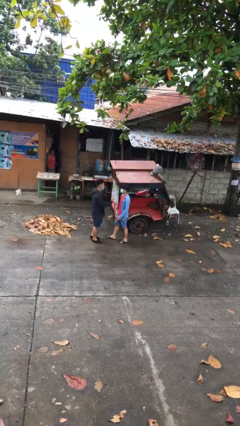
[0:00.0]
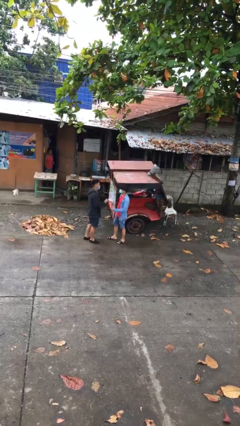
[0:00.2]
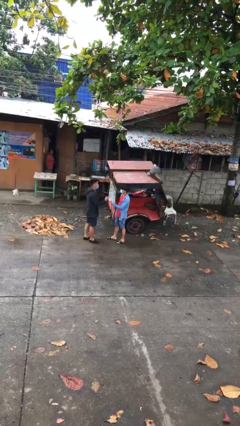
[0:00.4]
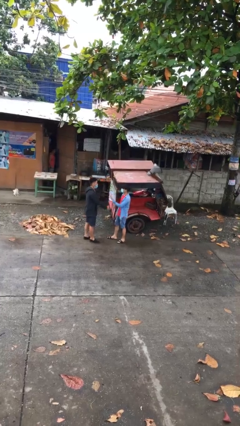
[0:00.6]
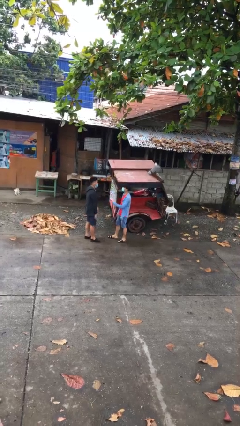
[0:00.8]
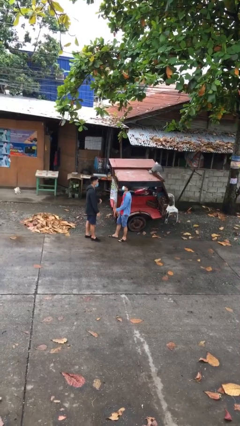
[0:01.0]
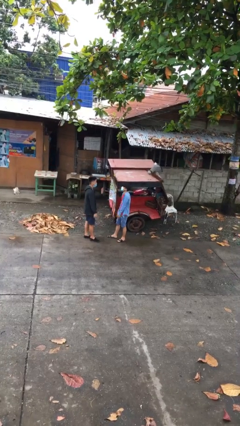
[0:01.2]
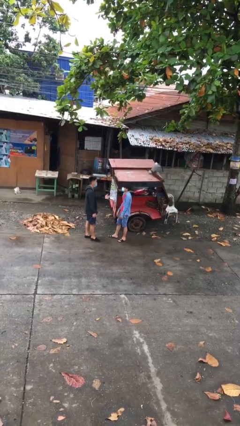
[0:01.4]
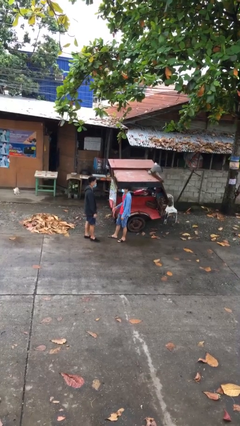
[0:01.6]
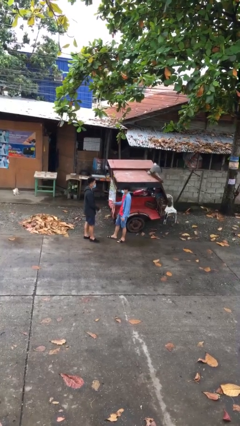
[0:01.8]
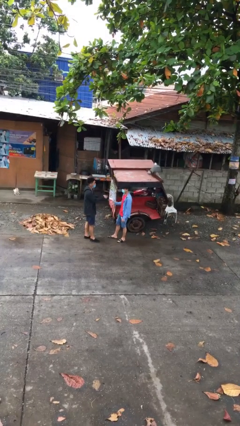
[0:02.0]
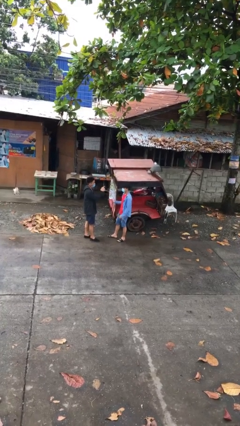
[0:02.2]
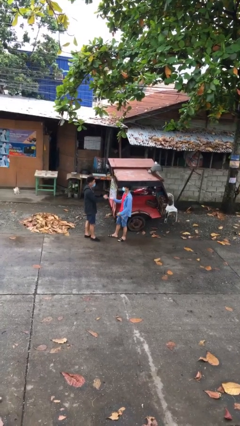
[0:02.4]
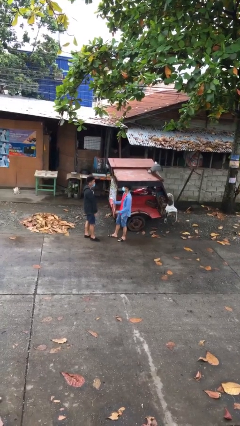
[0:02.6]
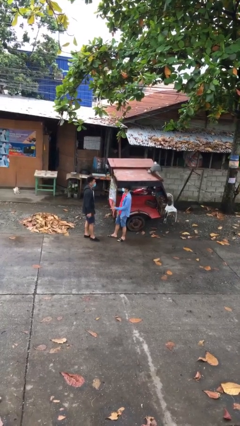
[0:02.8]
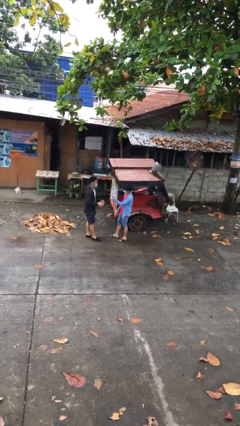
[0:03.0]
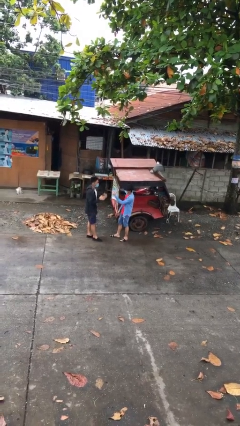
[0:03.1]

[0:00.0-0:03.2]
person talks to person

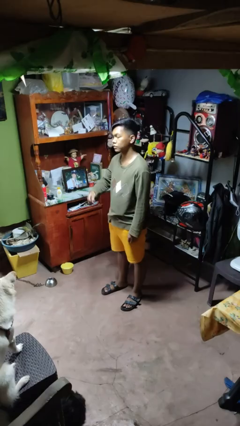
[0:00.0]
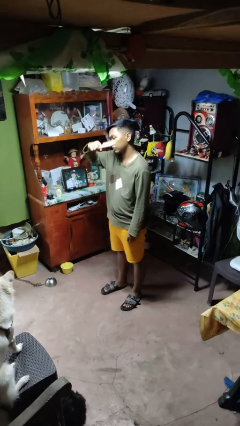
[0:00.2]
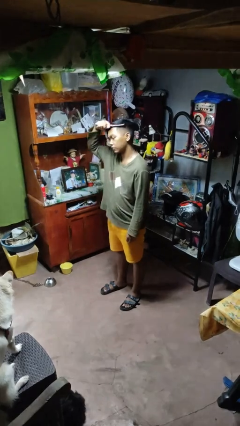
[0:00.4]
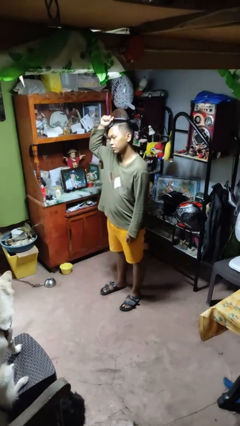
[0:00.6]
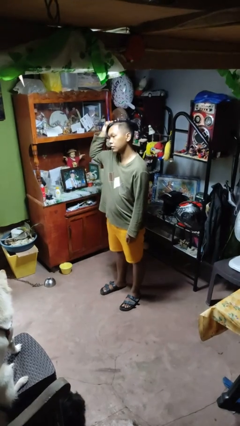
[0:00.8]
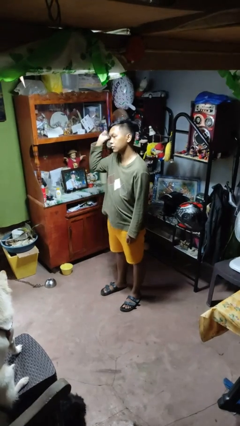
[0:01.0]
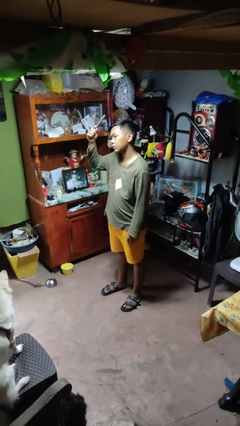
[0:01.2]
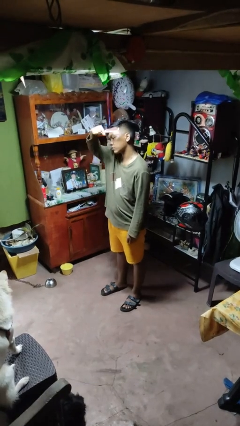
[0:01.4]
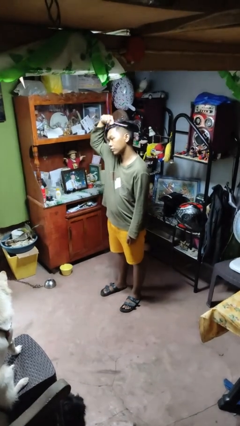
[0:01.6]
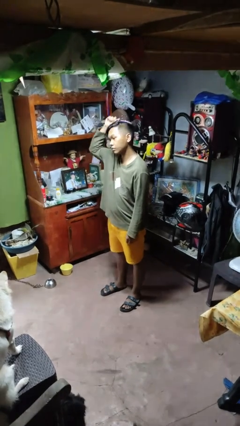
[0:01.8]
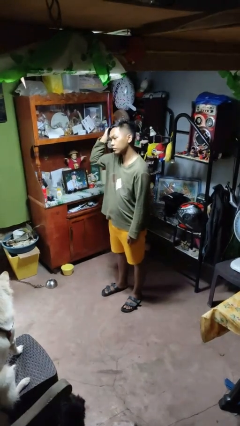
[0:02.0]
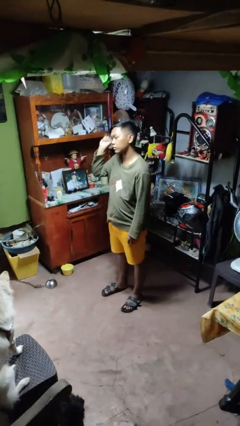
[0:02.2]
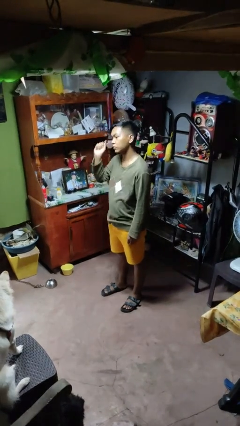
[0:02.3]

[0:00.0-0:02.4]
person brushes hair

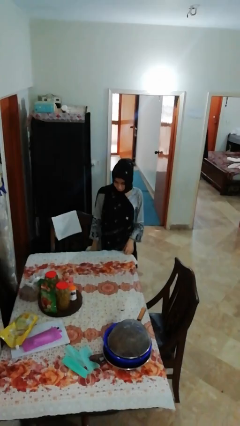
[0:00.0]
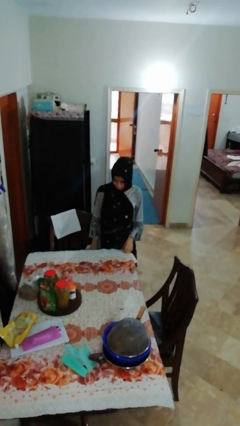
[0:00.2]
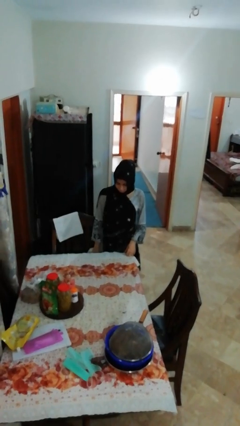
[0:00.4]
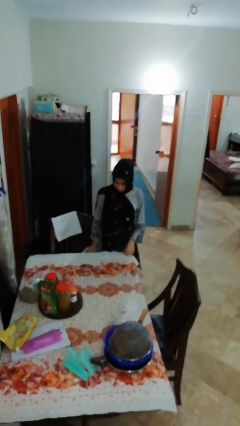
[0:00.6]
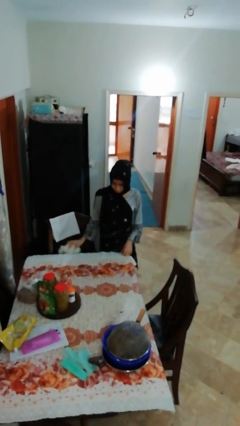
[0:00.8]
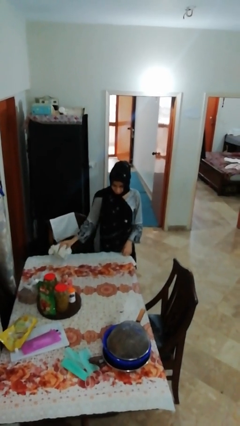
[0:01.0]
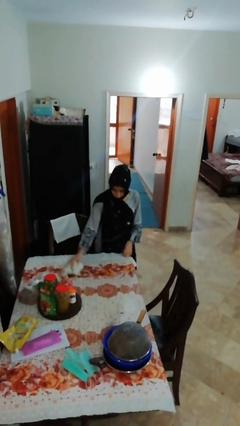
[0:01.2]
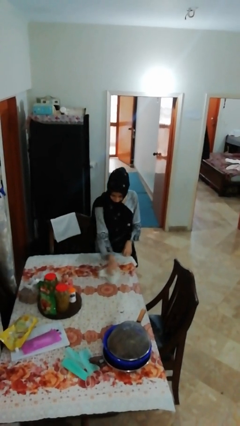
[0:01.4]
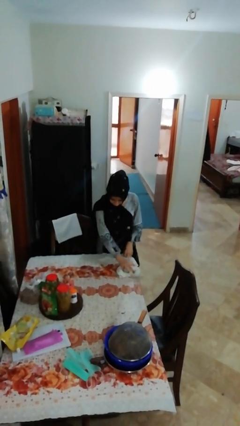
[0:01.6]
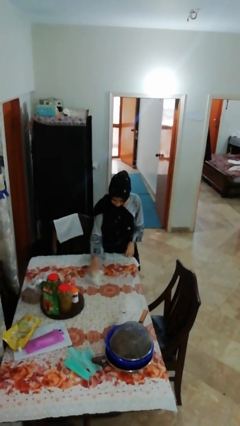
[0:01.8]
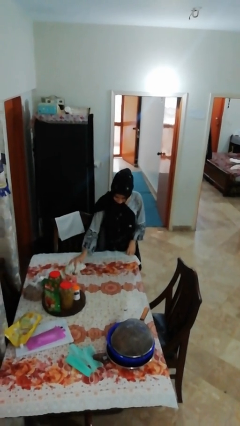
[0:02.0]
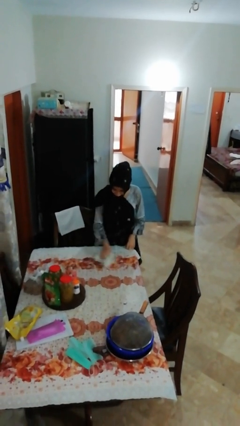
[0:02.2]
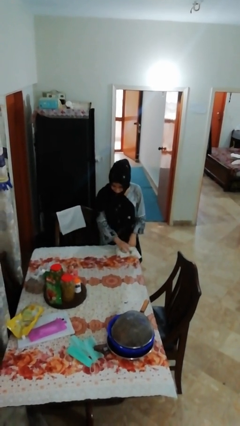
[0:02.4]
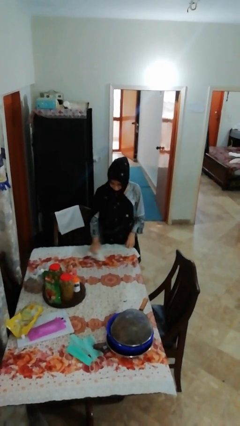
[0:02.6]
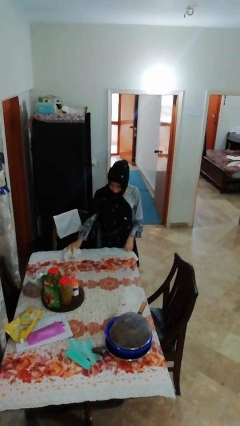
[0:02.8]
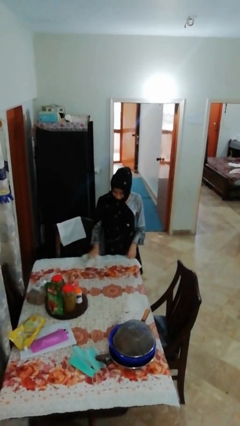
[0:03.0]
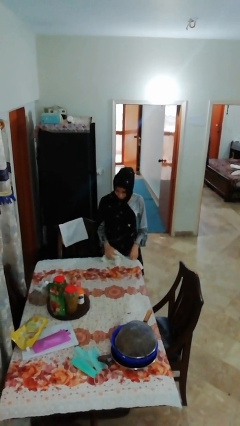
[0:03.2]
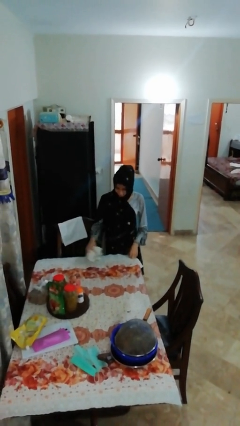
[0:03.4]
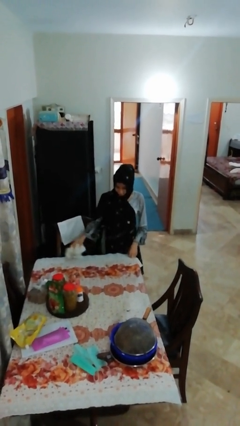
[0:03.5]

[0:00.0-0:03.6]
person cleans table with rag

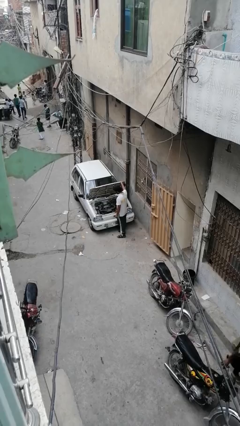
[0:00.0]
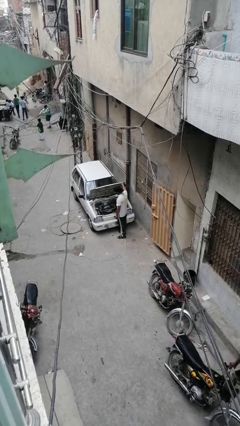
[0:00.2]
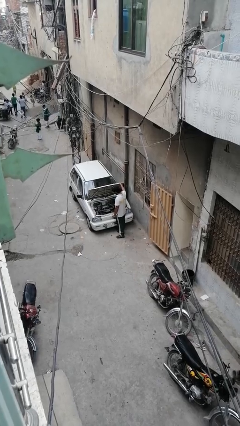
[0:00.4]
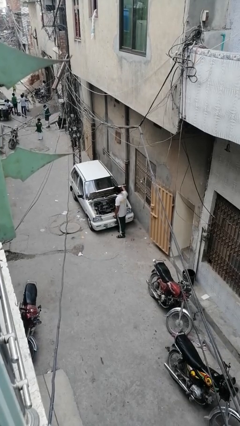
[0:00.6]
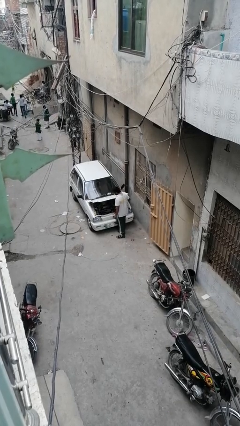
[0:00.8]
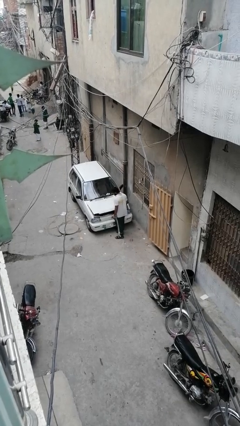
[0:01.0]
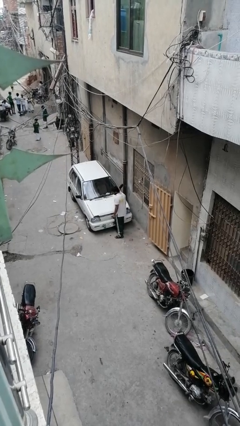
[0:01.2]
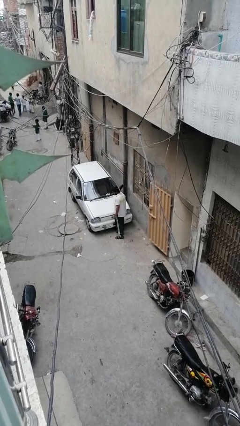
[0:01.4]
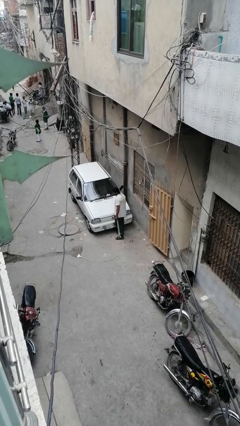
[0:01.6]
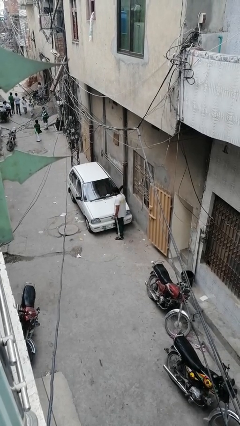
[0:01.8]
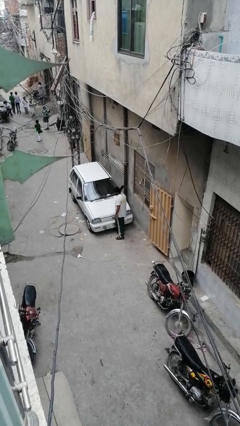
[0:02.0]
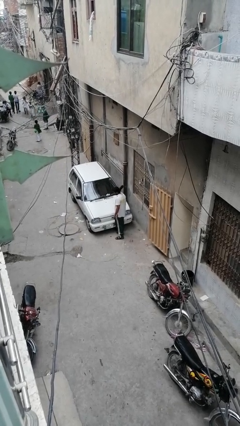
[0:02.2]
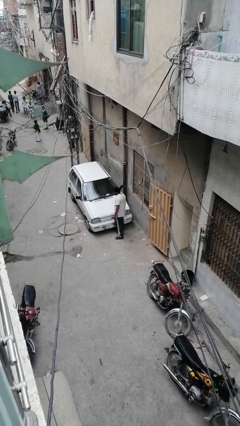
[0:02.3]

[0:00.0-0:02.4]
person closes car hood

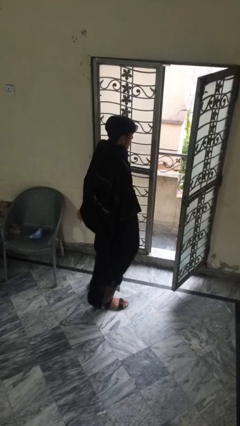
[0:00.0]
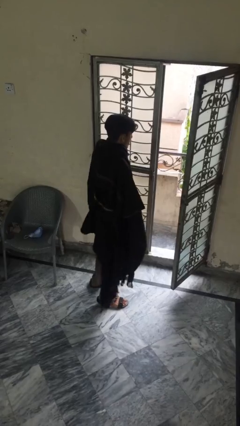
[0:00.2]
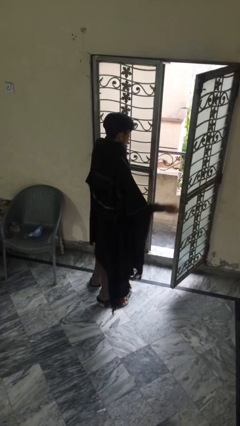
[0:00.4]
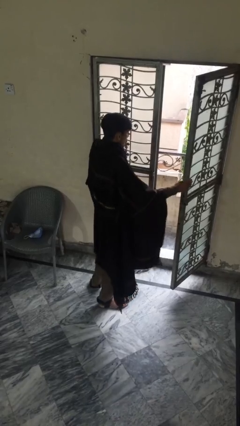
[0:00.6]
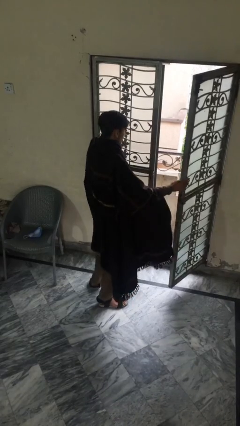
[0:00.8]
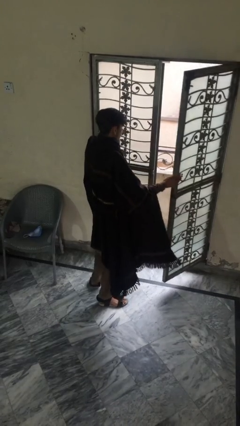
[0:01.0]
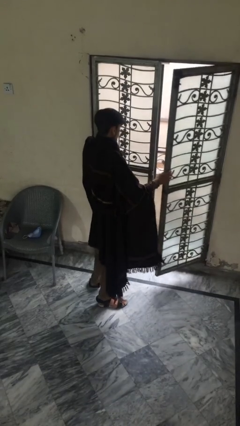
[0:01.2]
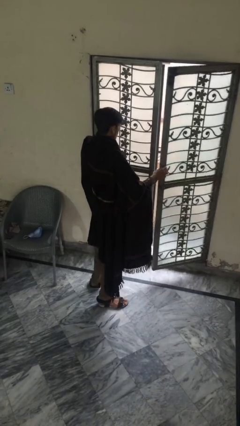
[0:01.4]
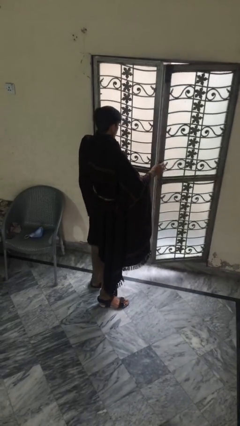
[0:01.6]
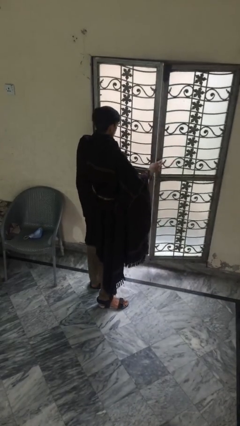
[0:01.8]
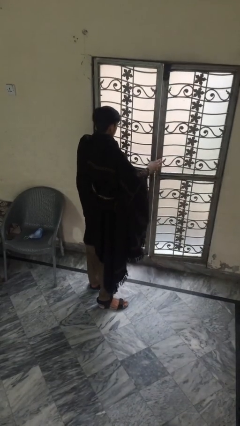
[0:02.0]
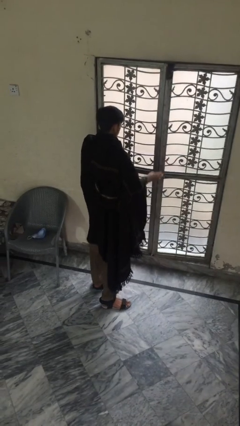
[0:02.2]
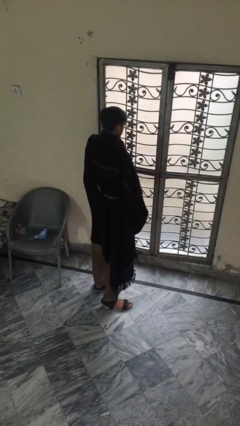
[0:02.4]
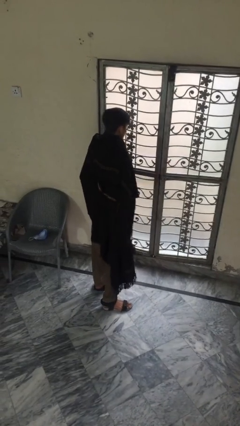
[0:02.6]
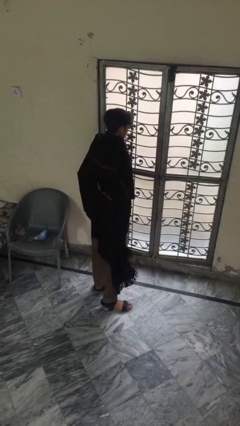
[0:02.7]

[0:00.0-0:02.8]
person closes facility door

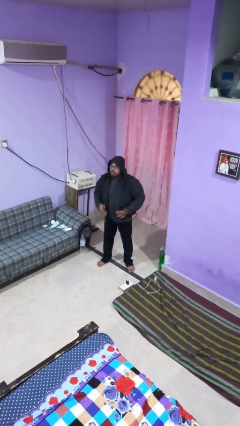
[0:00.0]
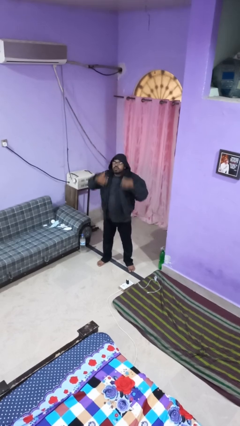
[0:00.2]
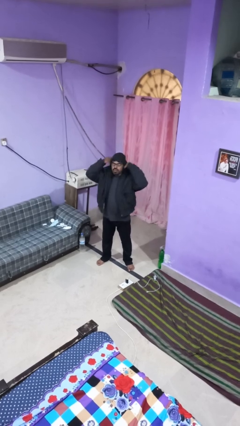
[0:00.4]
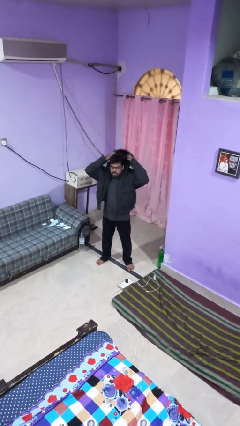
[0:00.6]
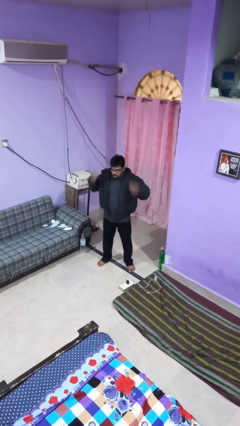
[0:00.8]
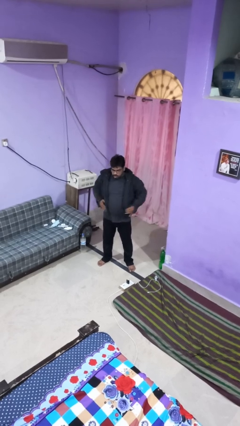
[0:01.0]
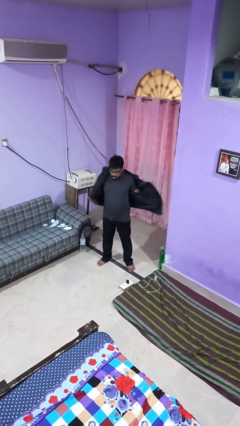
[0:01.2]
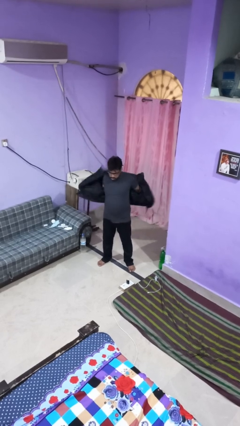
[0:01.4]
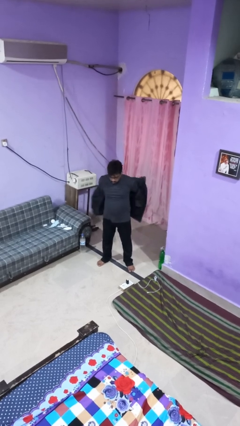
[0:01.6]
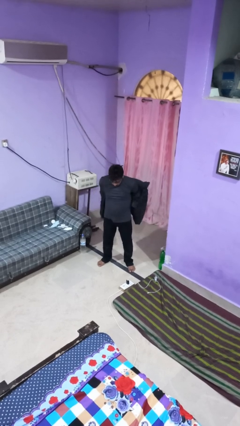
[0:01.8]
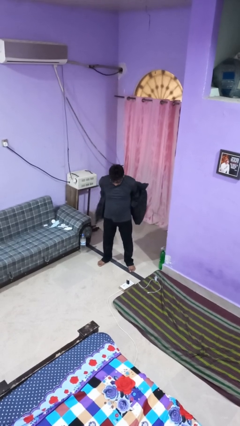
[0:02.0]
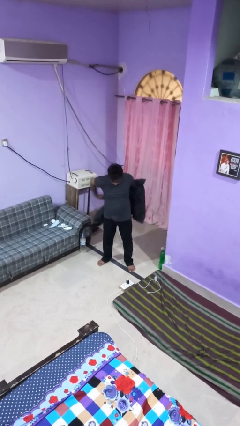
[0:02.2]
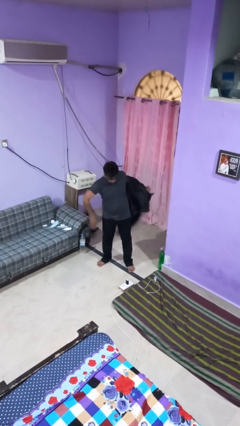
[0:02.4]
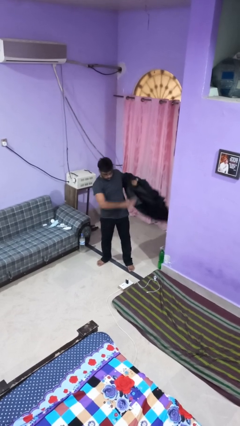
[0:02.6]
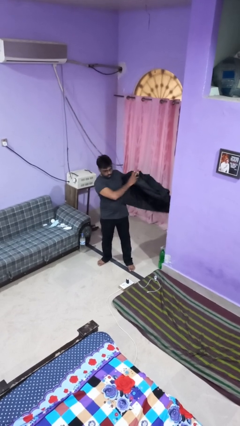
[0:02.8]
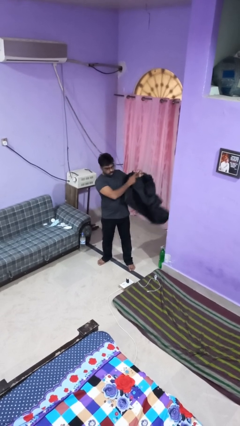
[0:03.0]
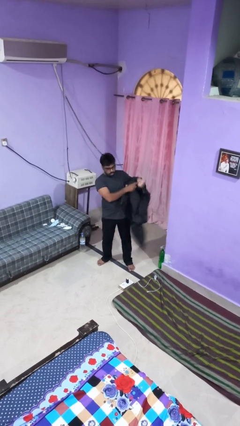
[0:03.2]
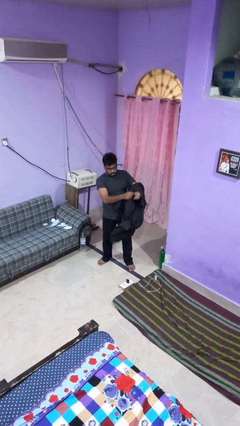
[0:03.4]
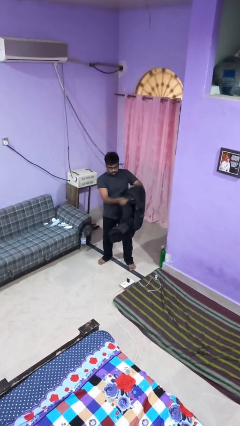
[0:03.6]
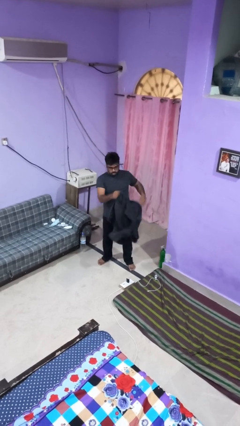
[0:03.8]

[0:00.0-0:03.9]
person takes off hoodie
